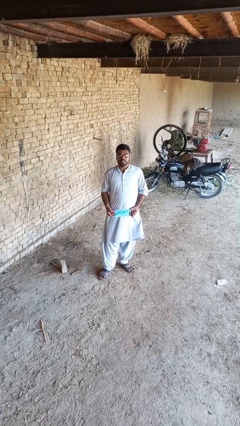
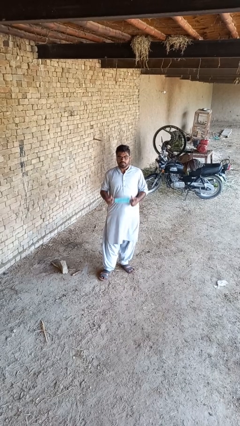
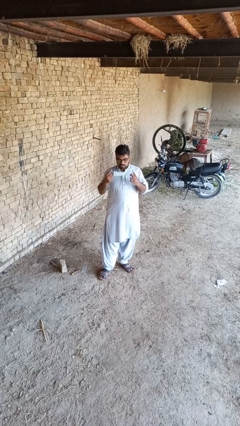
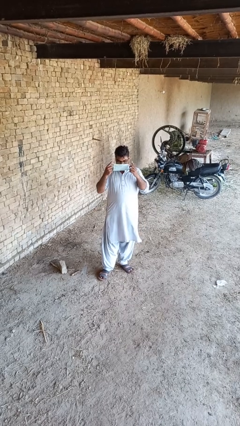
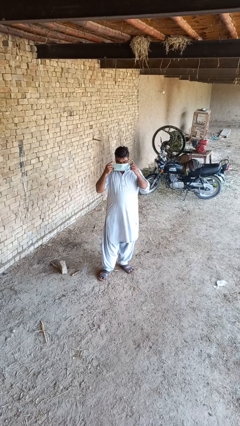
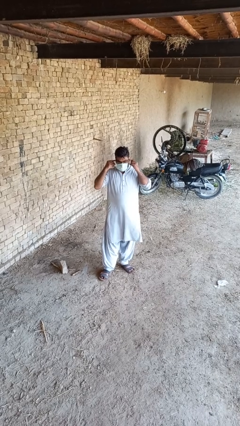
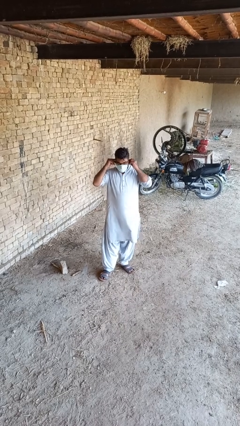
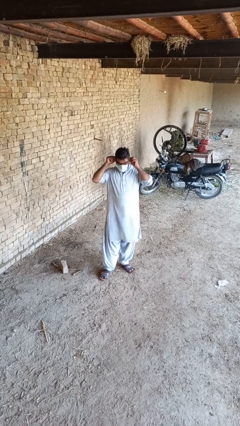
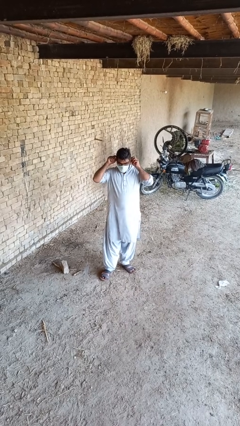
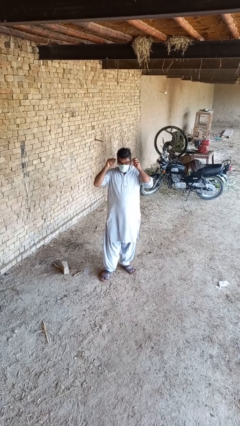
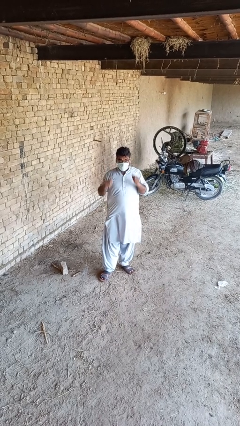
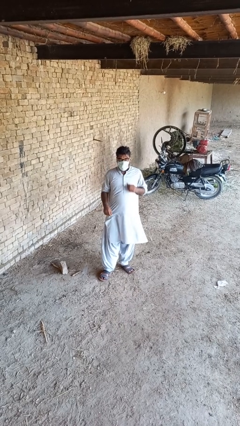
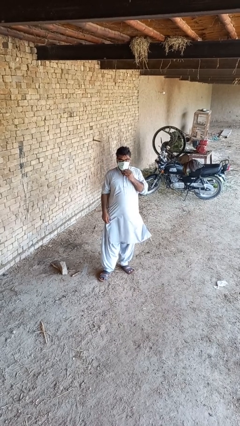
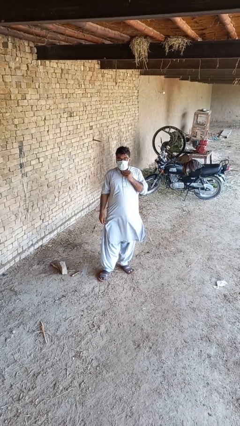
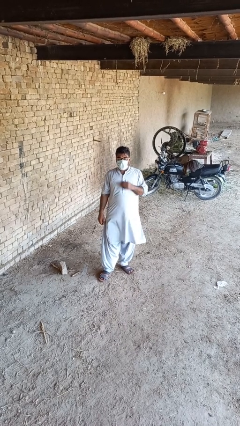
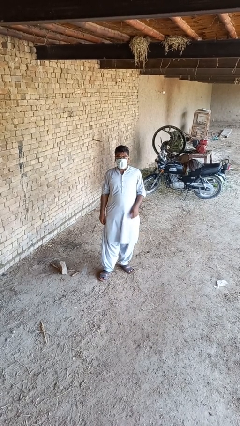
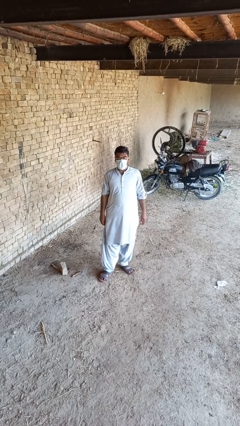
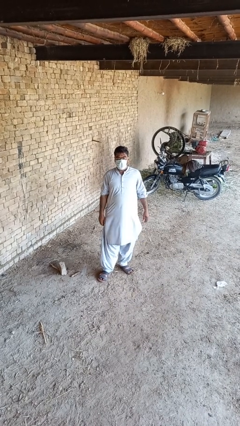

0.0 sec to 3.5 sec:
person puts on facemask

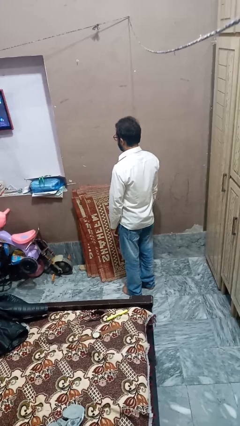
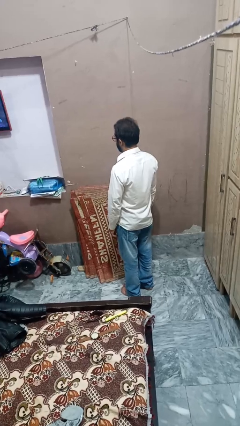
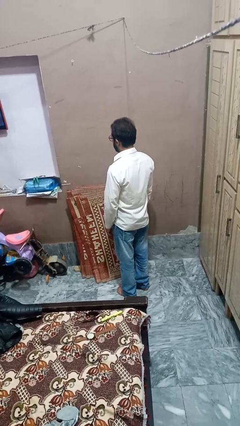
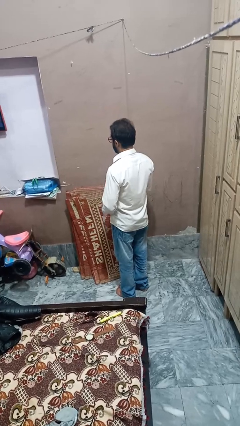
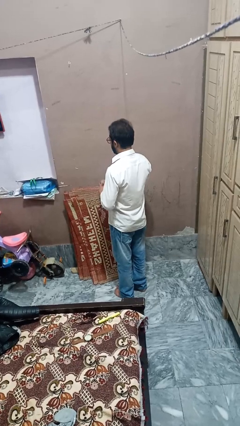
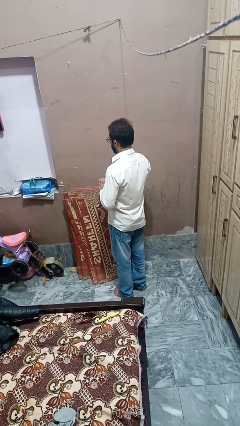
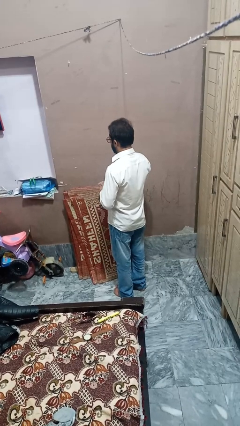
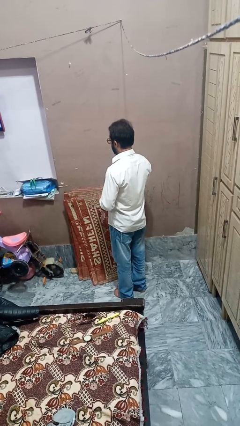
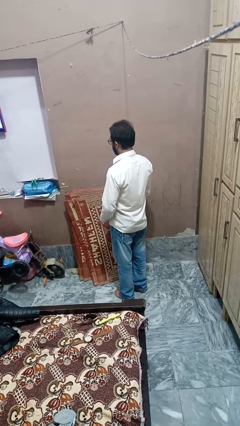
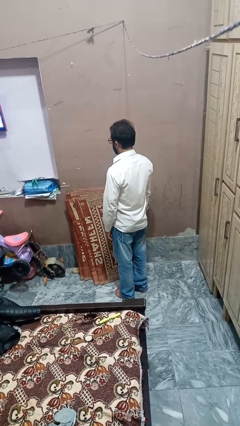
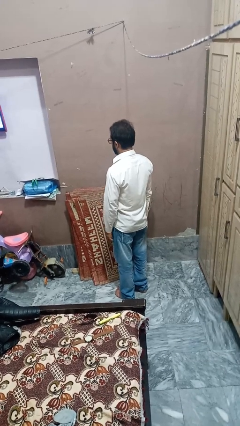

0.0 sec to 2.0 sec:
person puts on ring

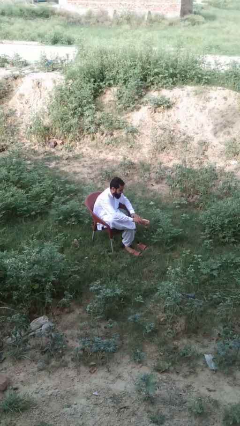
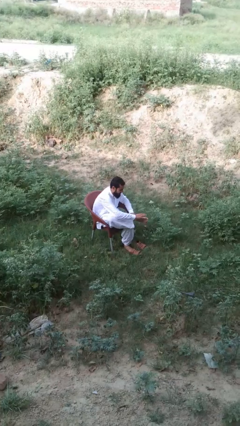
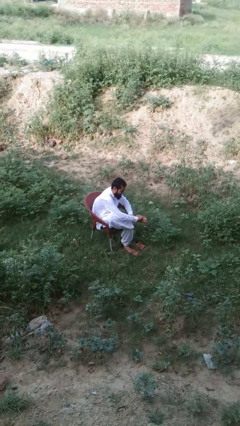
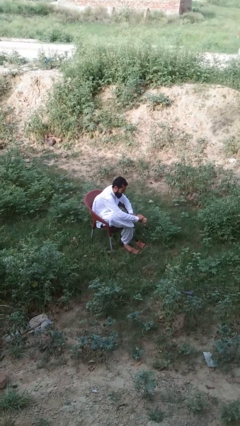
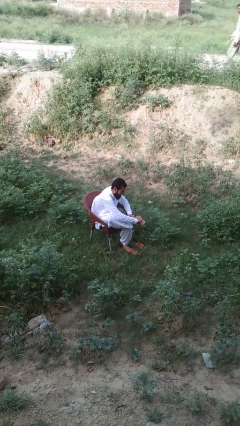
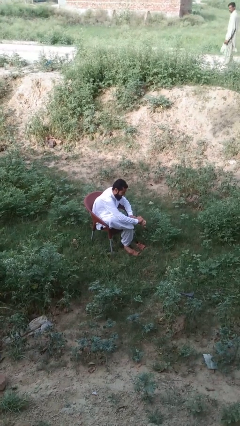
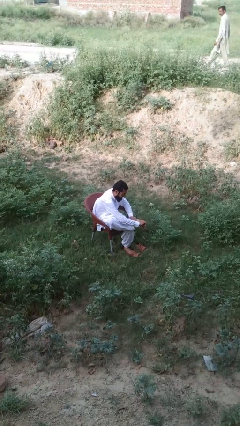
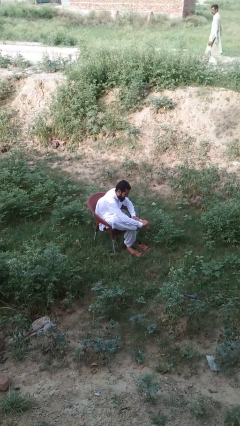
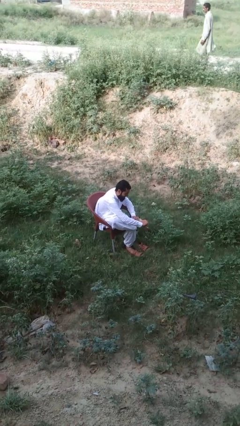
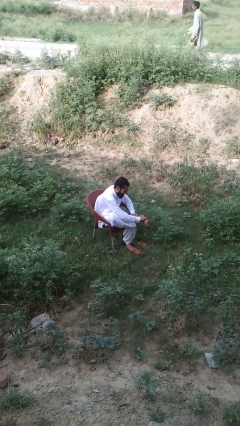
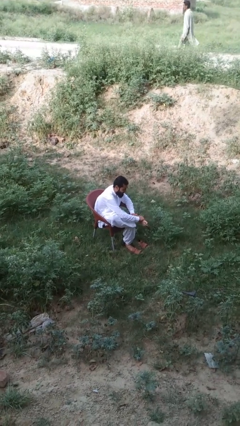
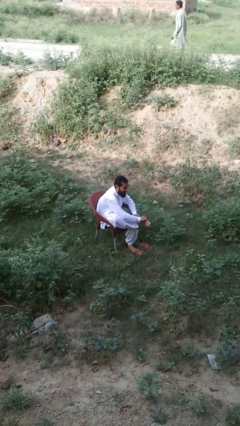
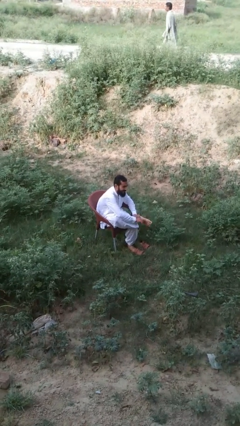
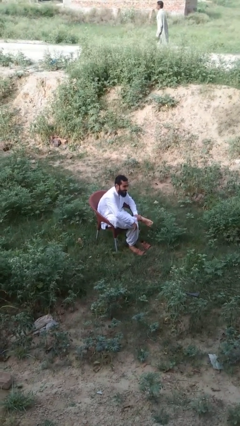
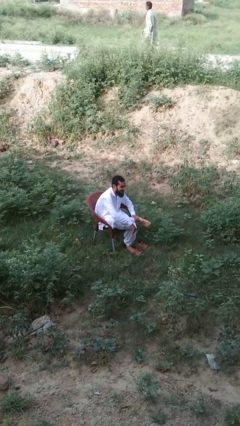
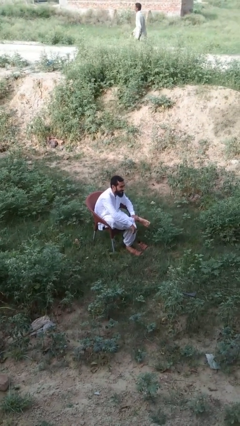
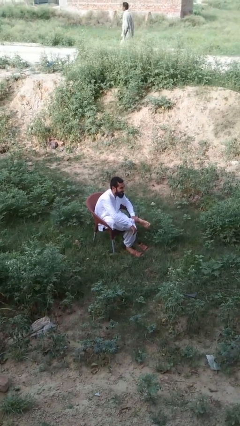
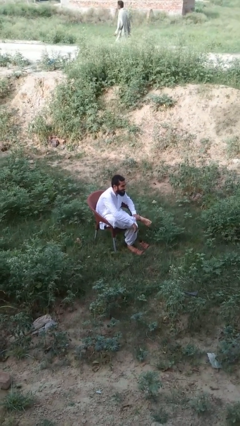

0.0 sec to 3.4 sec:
person stubs toe

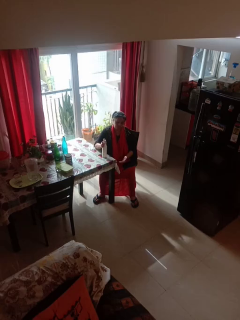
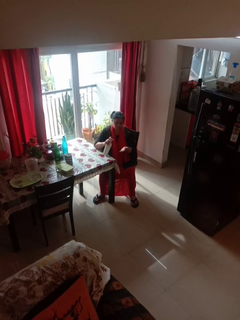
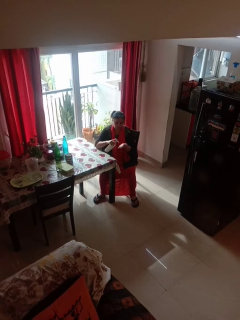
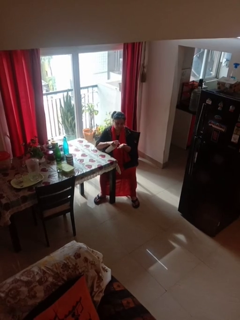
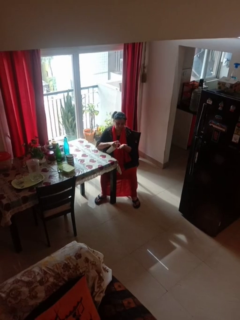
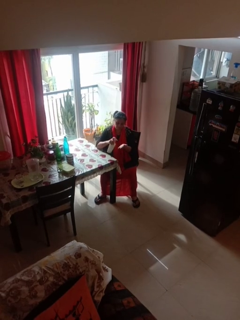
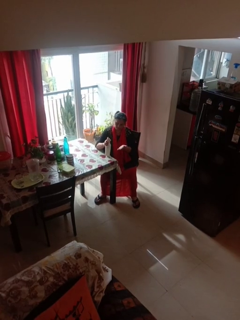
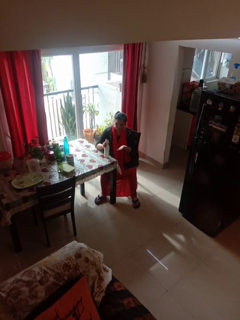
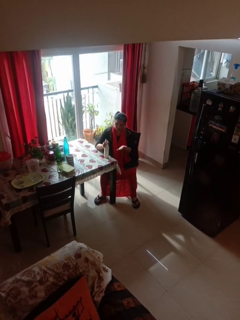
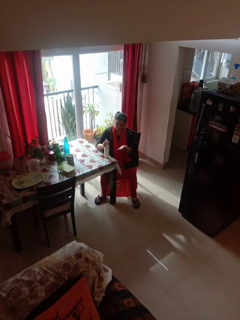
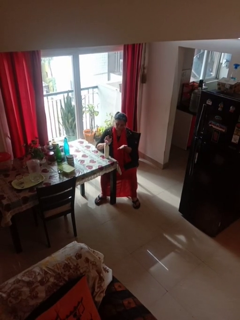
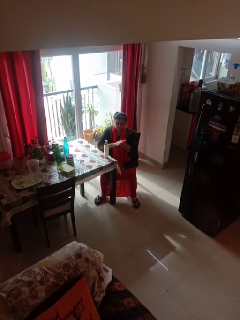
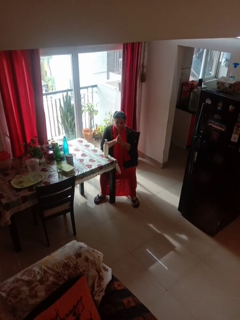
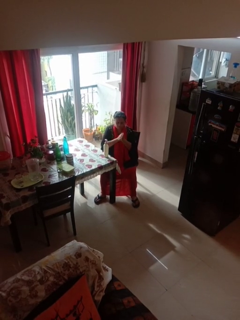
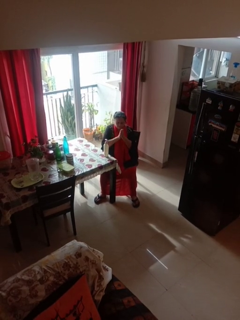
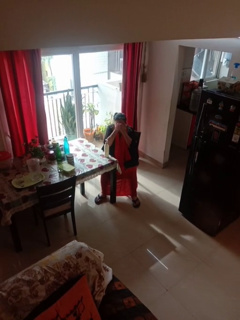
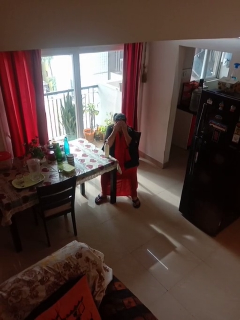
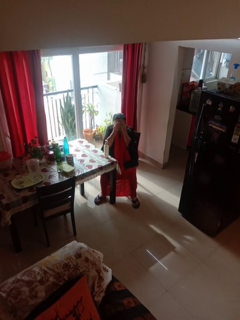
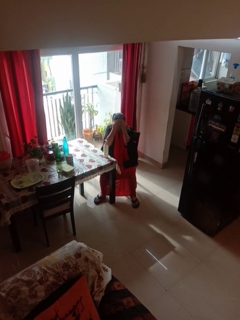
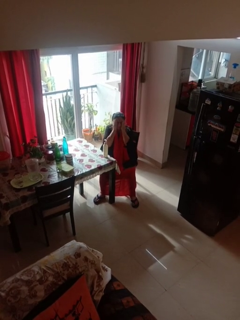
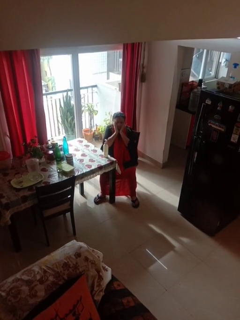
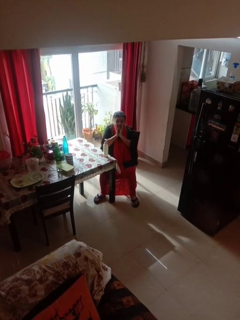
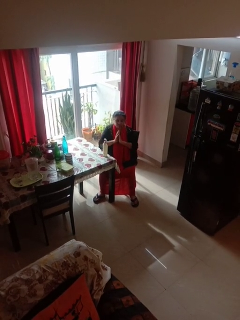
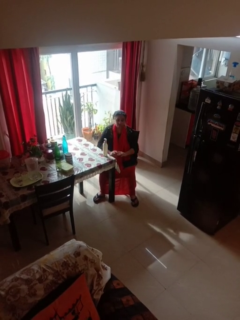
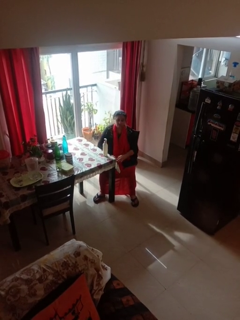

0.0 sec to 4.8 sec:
person applies facial moisturizer

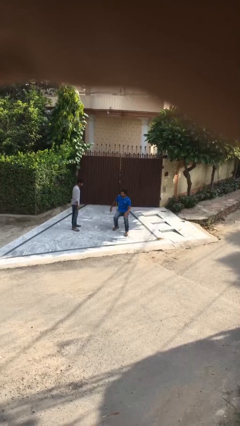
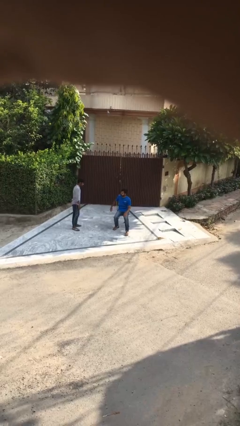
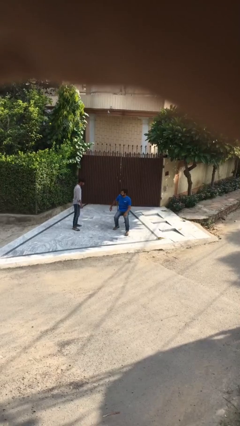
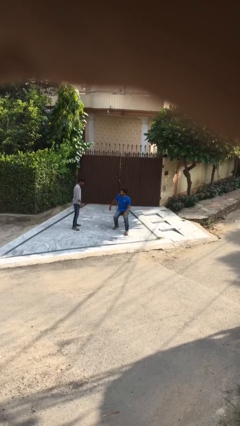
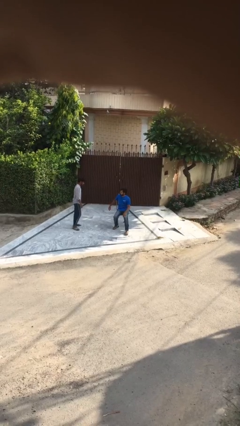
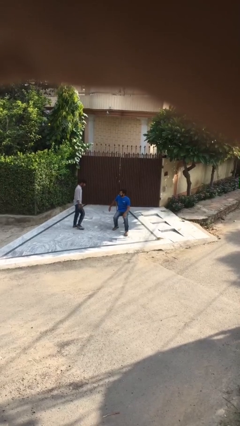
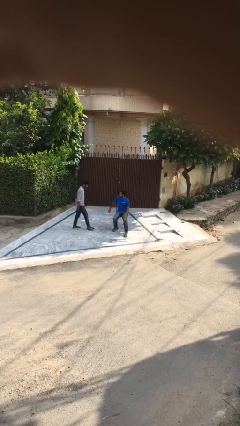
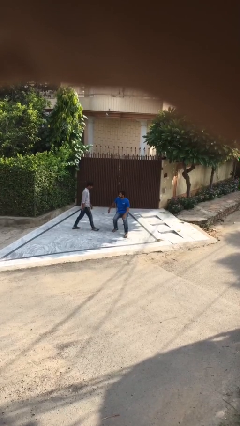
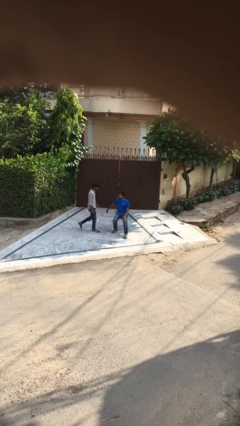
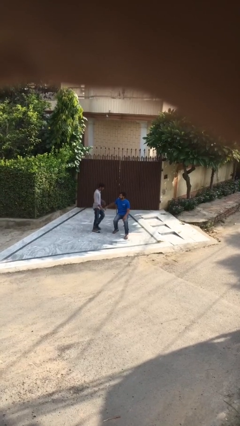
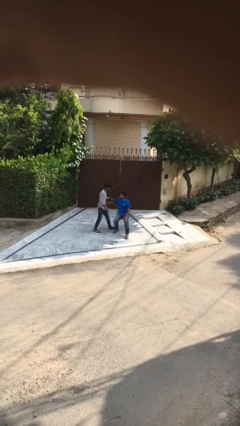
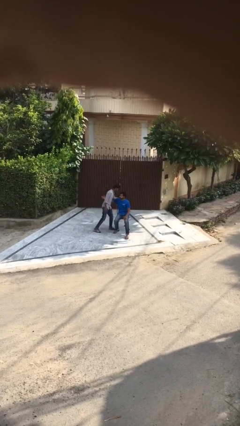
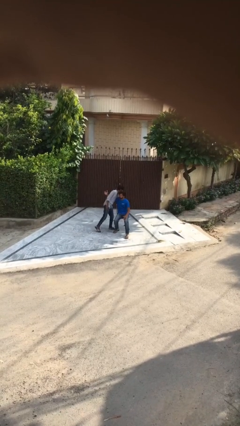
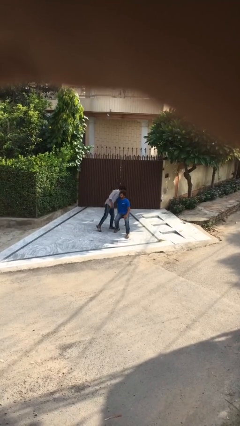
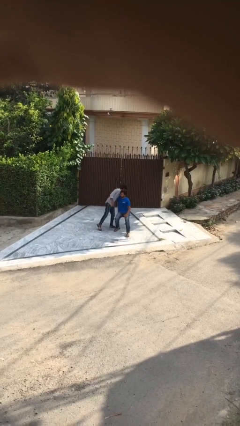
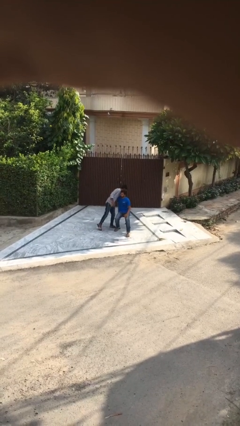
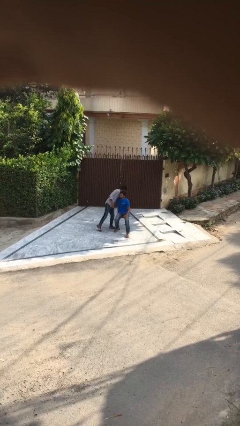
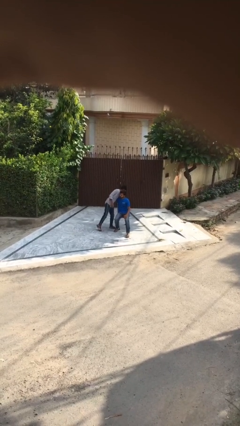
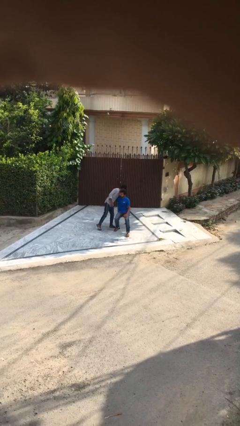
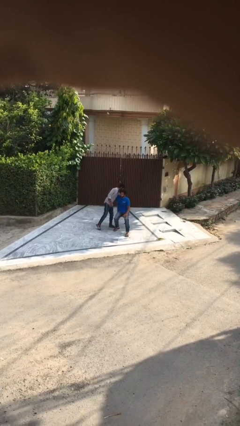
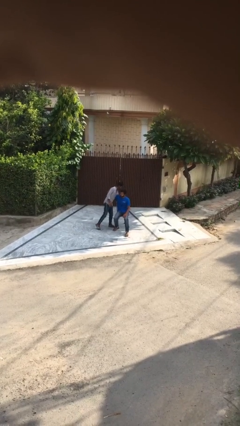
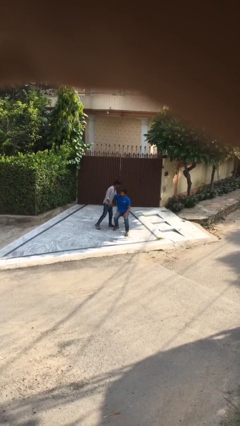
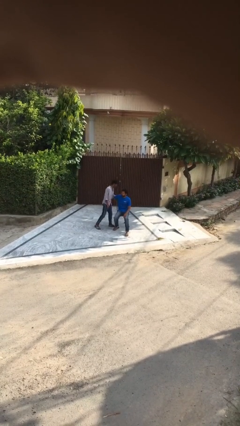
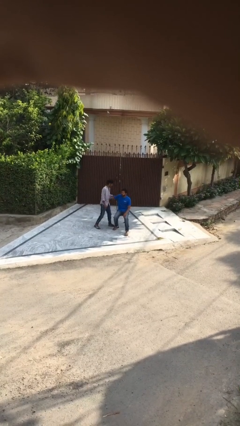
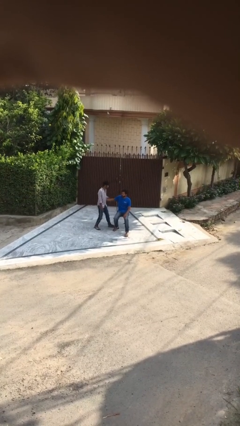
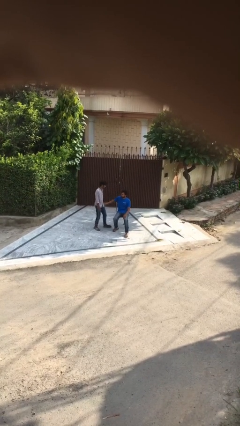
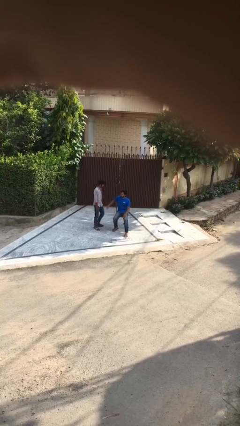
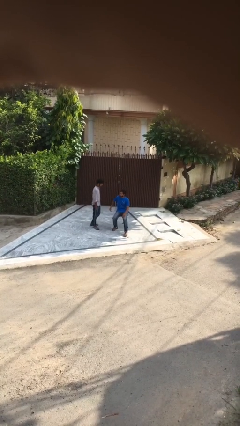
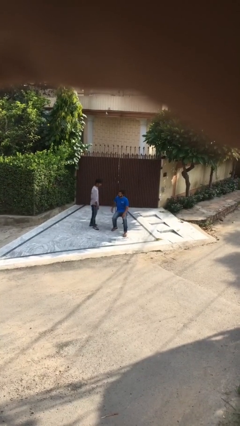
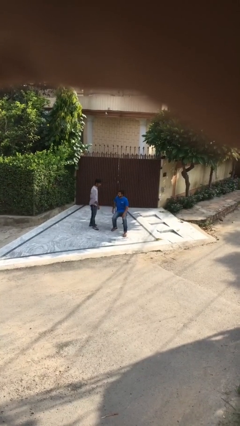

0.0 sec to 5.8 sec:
person embraces person
